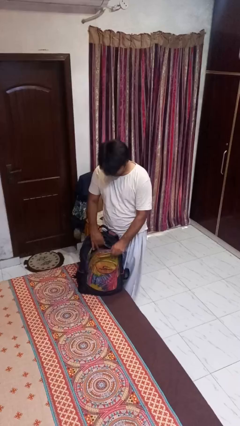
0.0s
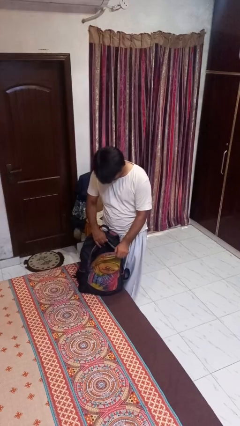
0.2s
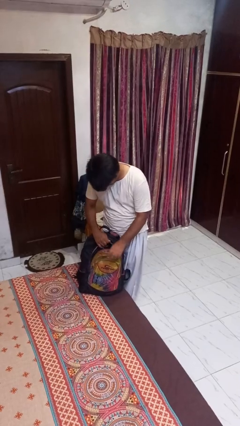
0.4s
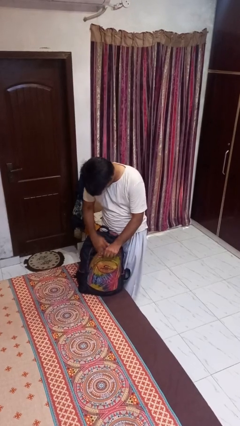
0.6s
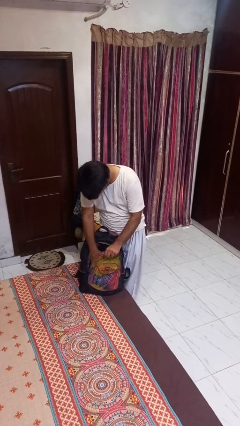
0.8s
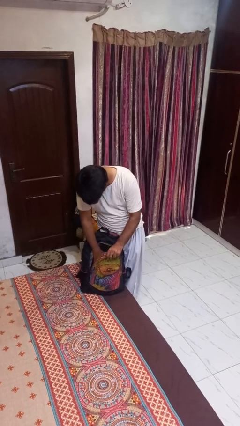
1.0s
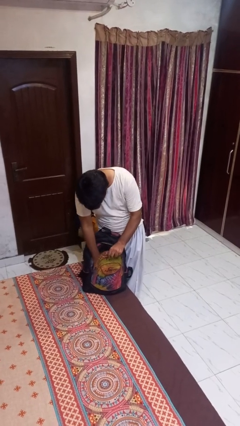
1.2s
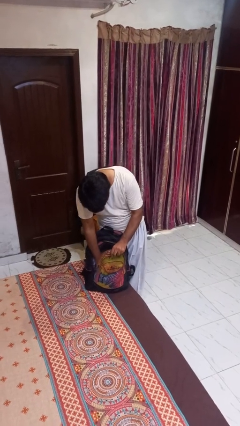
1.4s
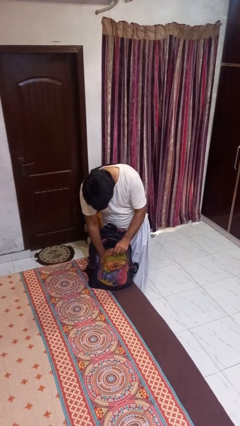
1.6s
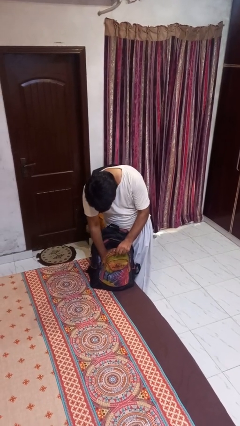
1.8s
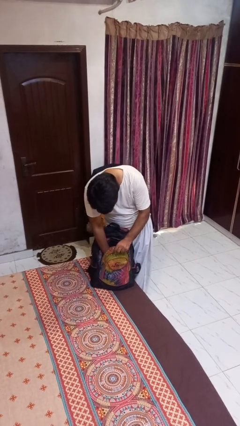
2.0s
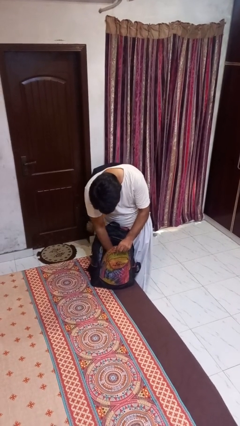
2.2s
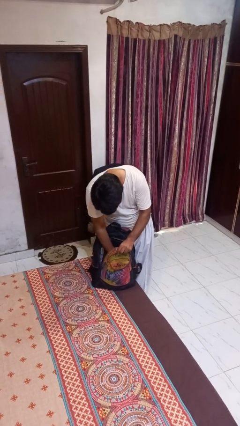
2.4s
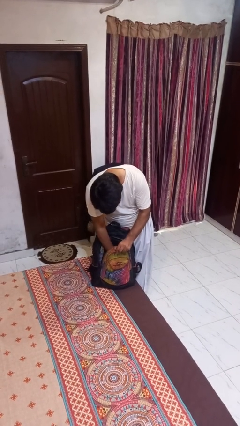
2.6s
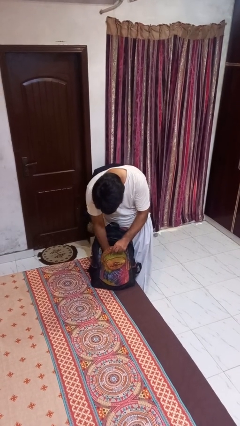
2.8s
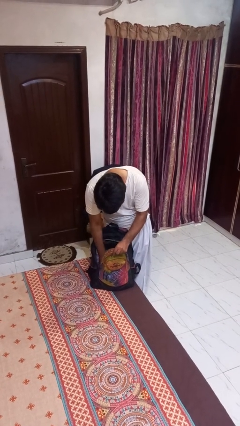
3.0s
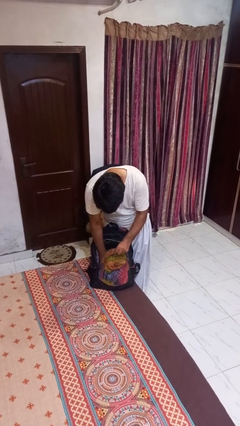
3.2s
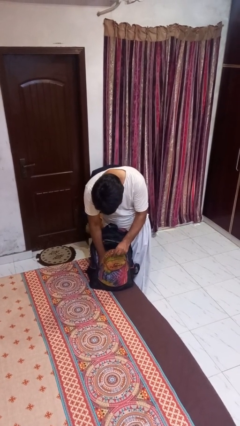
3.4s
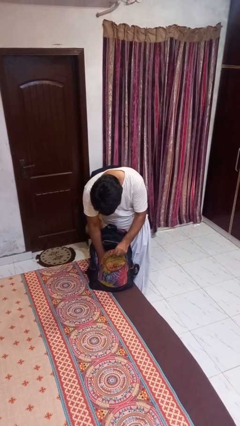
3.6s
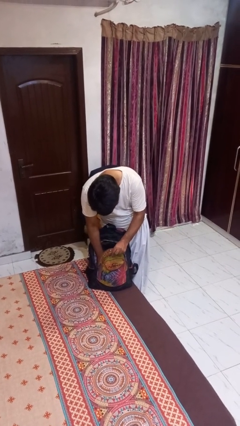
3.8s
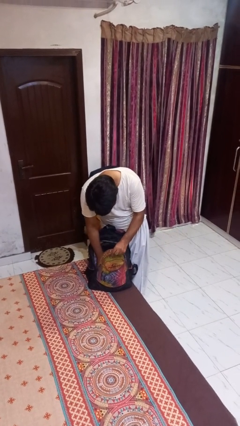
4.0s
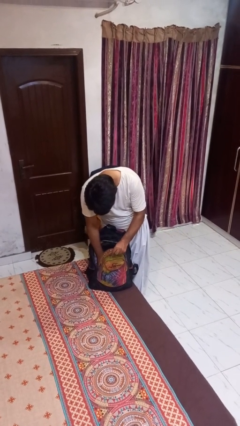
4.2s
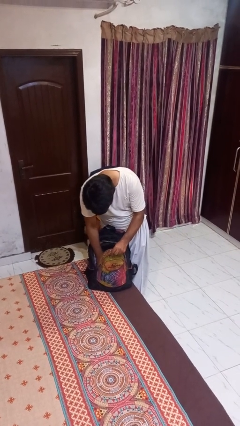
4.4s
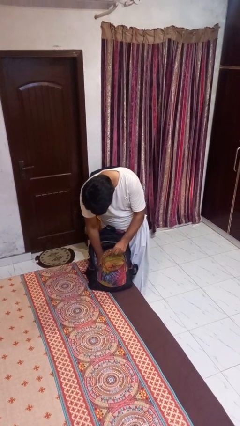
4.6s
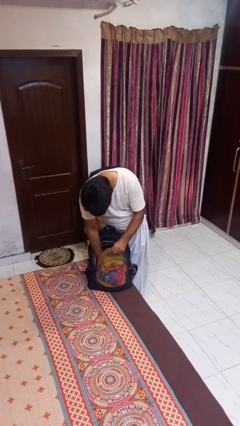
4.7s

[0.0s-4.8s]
person searches in backpack

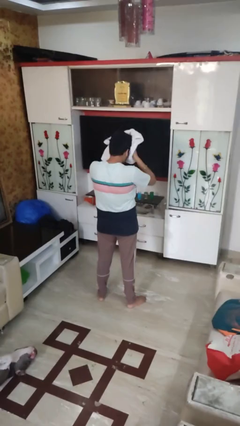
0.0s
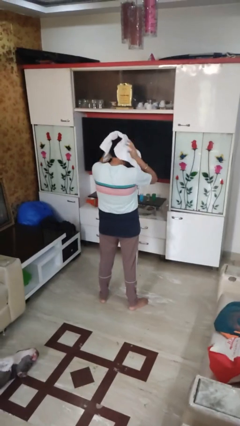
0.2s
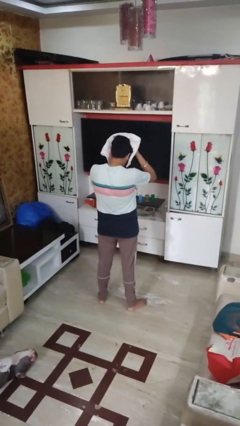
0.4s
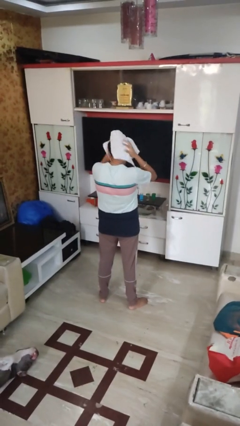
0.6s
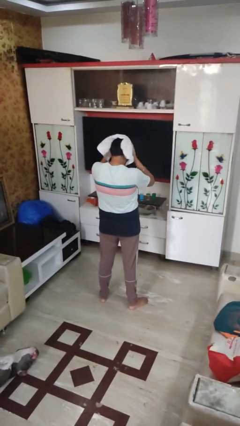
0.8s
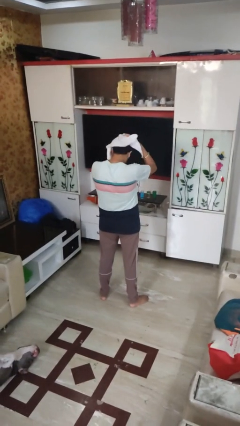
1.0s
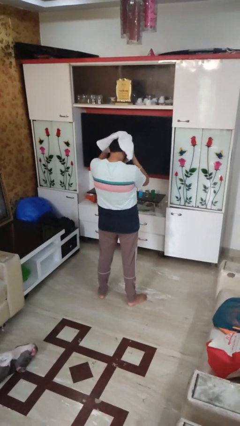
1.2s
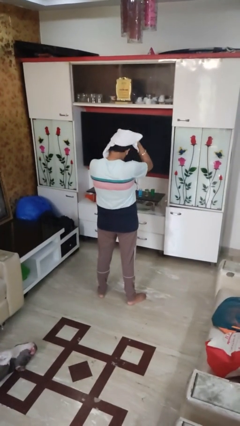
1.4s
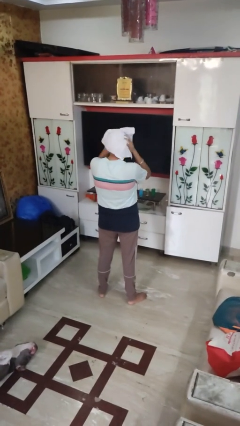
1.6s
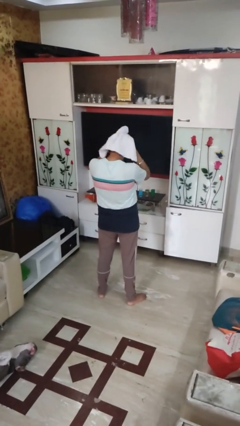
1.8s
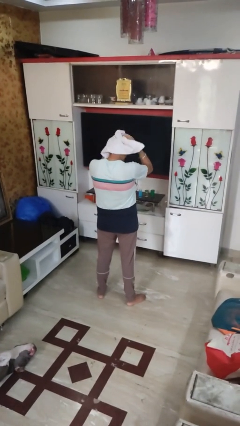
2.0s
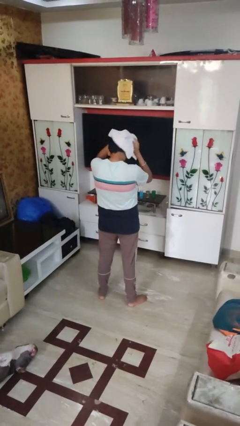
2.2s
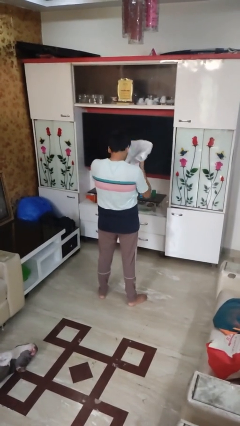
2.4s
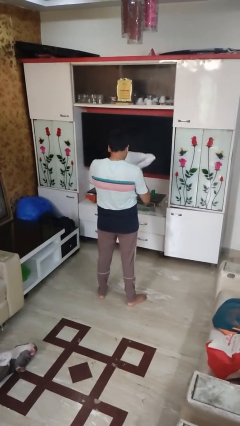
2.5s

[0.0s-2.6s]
person dries hair with towel

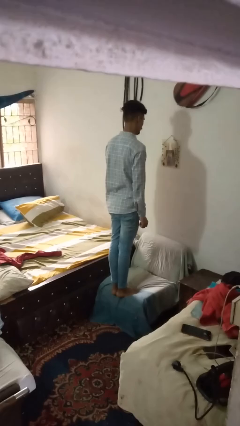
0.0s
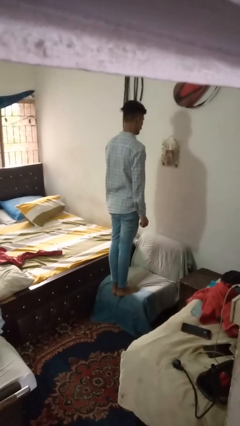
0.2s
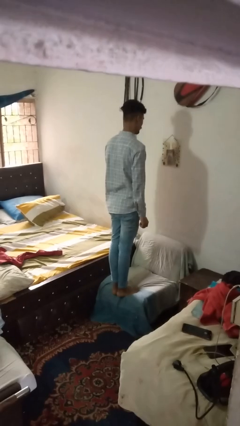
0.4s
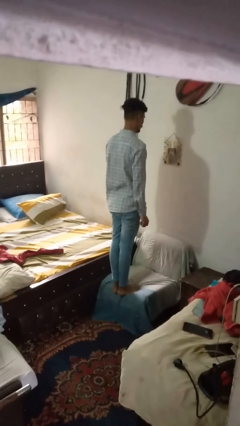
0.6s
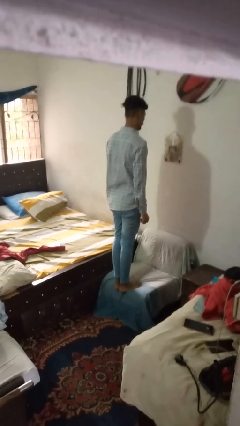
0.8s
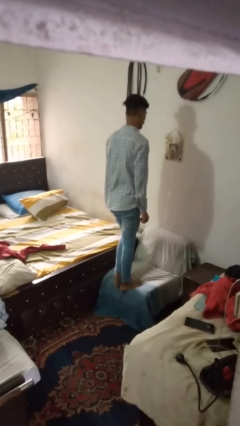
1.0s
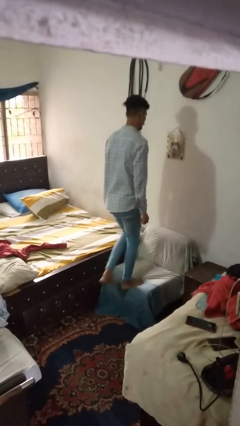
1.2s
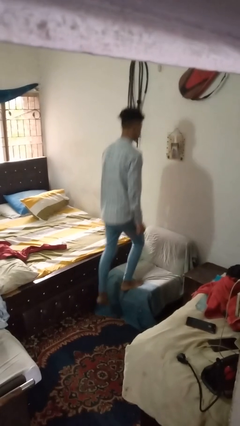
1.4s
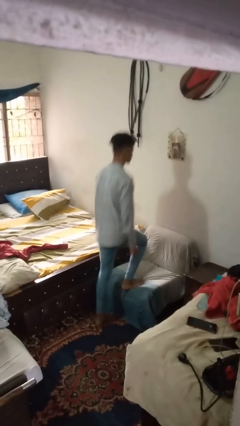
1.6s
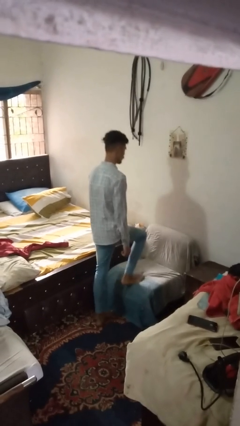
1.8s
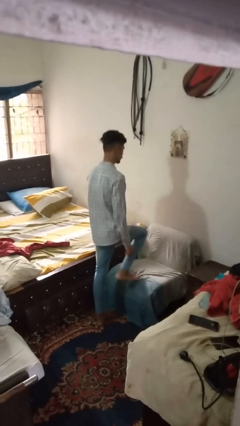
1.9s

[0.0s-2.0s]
person climbs off couch

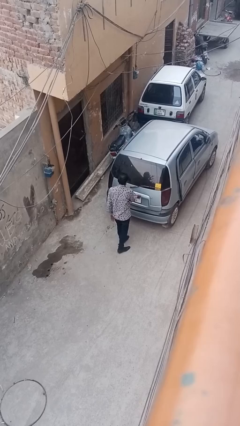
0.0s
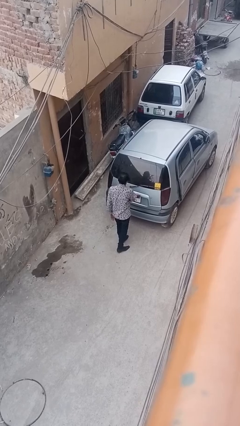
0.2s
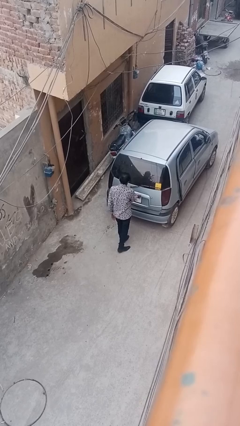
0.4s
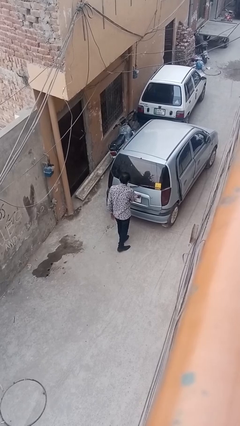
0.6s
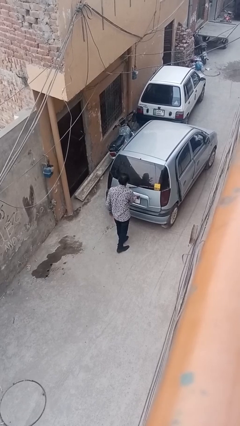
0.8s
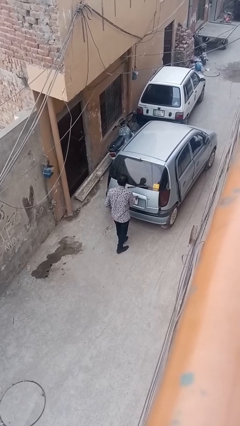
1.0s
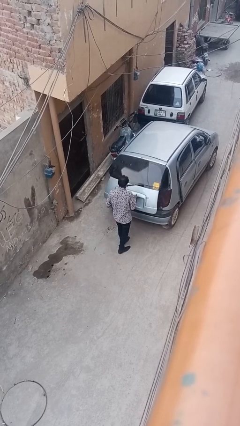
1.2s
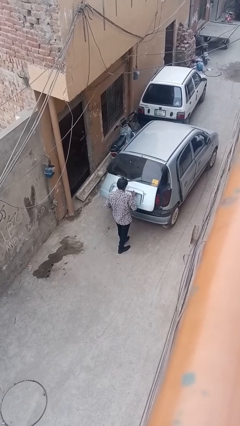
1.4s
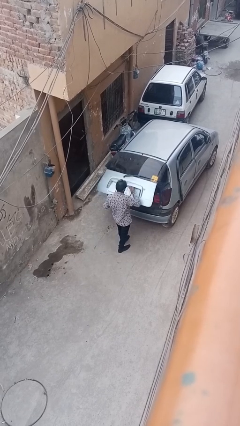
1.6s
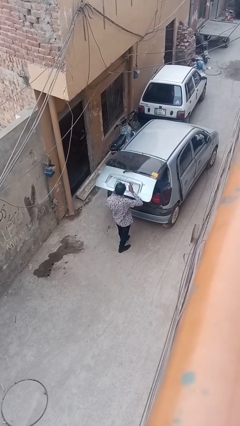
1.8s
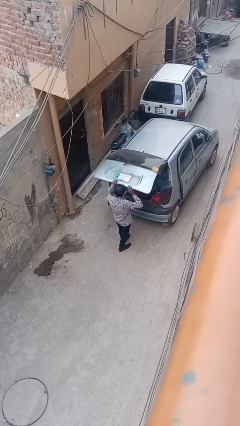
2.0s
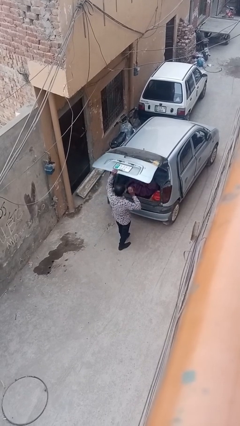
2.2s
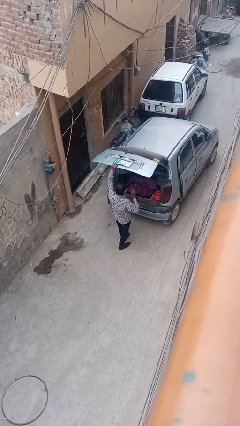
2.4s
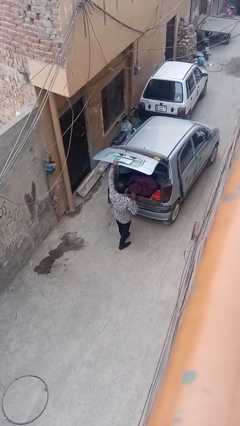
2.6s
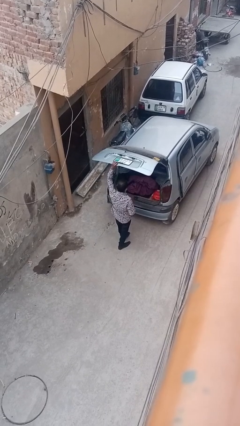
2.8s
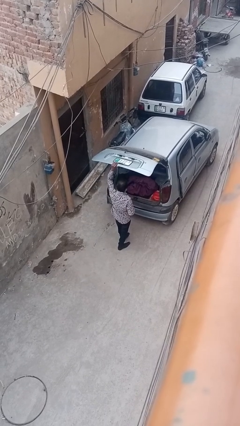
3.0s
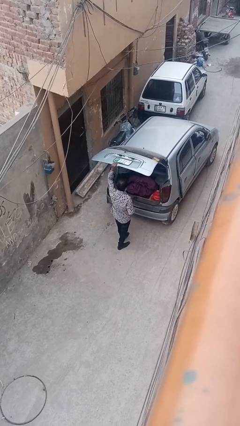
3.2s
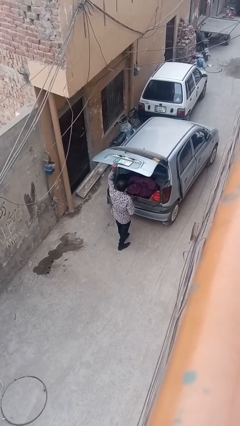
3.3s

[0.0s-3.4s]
person opens car trunk

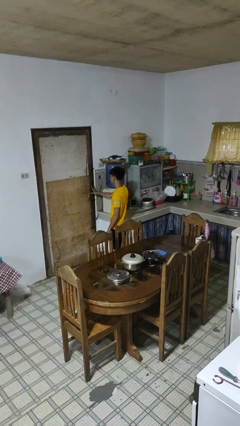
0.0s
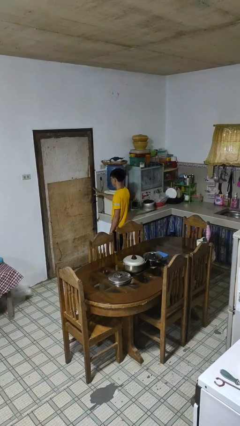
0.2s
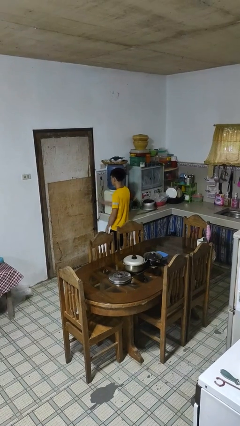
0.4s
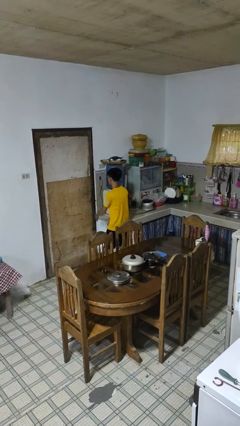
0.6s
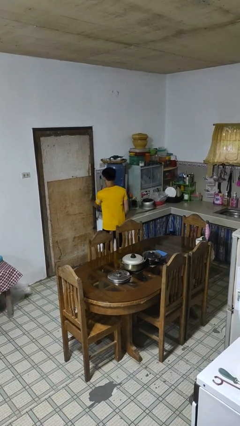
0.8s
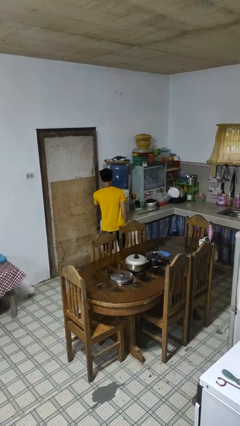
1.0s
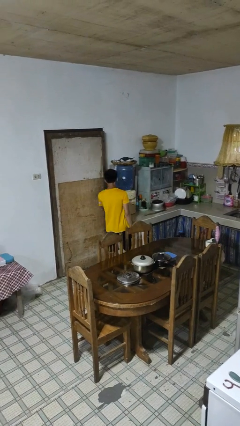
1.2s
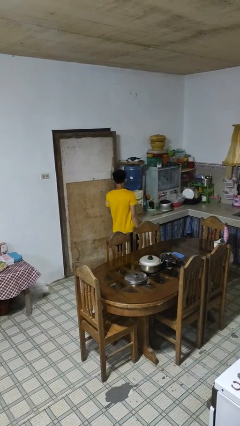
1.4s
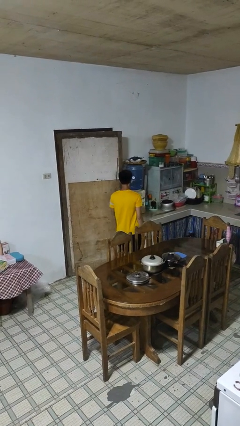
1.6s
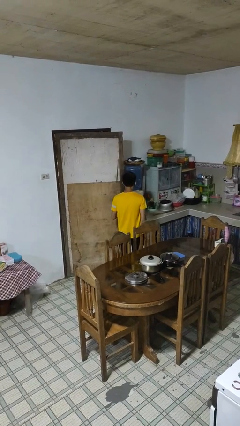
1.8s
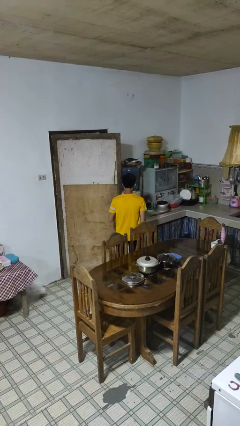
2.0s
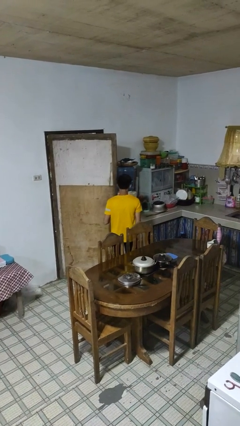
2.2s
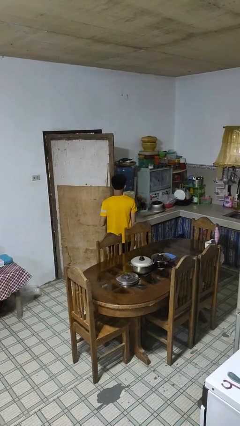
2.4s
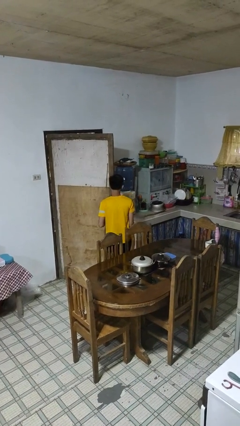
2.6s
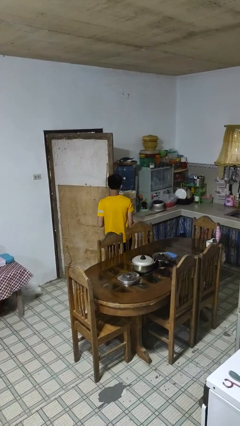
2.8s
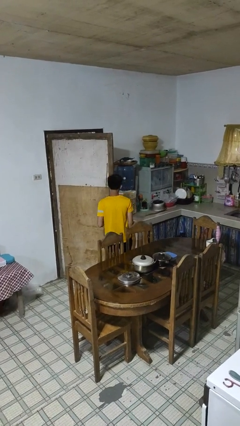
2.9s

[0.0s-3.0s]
person opens facility door

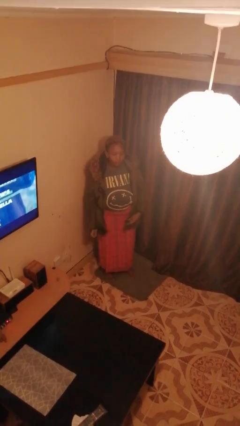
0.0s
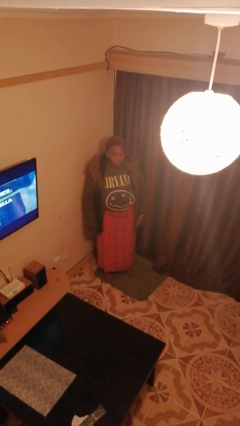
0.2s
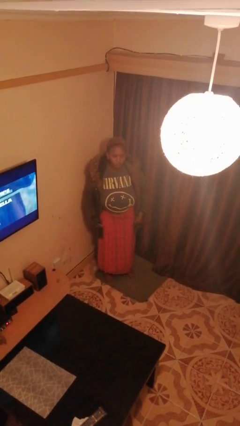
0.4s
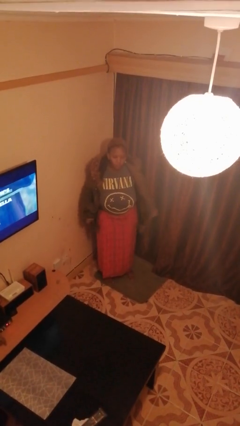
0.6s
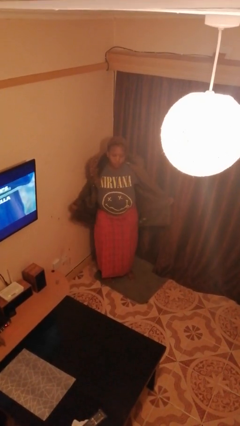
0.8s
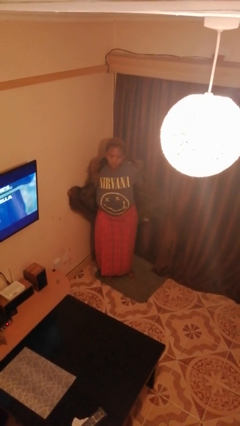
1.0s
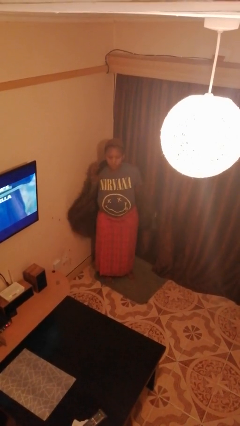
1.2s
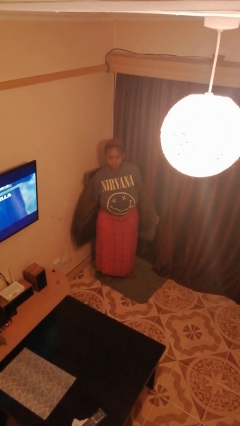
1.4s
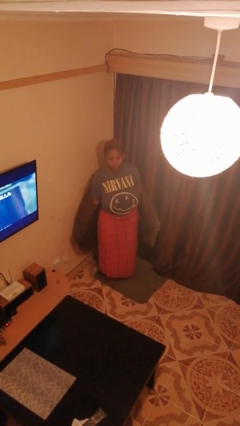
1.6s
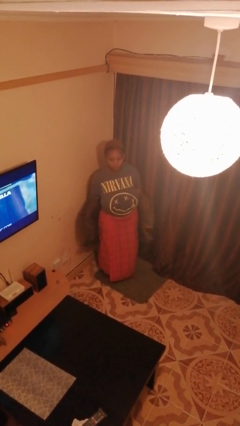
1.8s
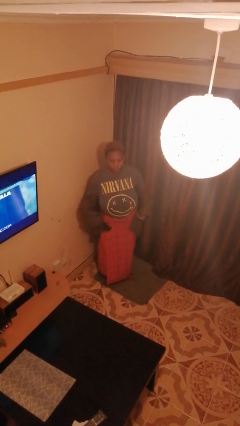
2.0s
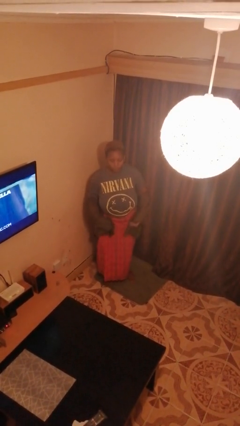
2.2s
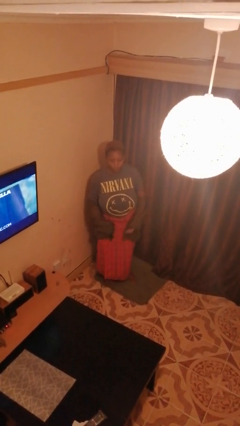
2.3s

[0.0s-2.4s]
person takes off jacket
